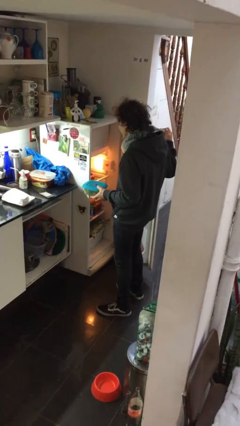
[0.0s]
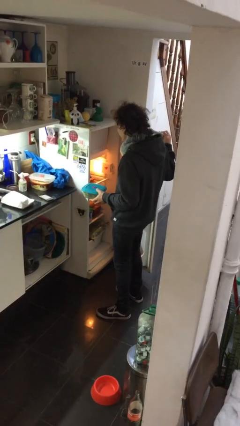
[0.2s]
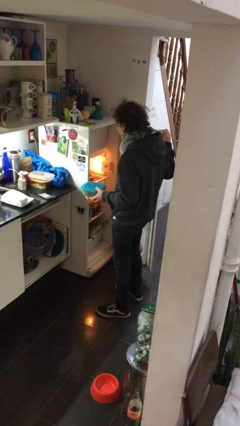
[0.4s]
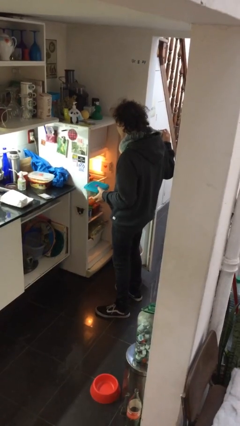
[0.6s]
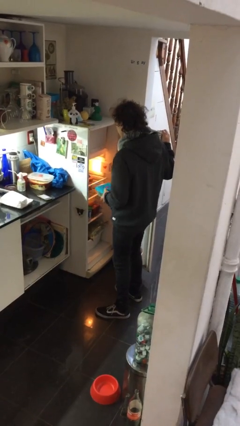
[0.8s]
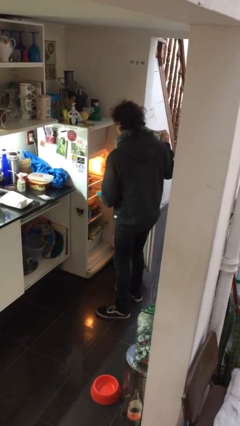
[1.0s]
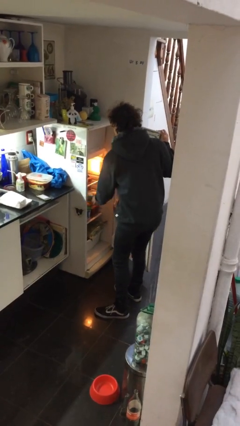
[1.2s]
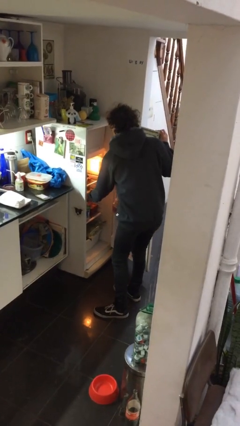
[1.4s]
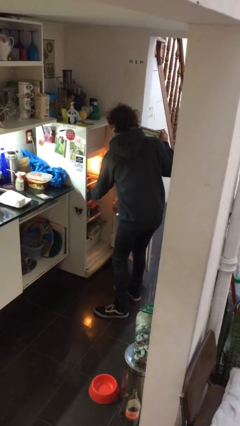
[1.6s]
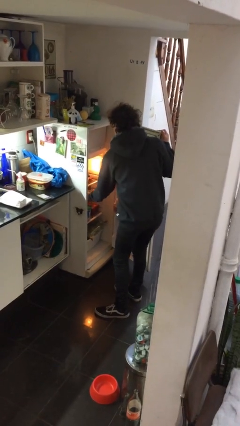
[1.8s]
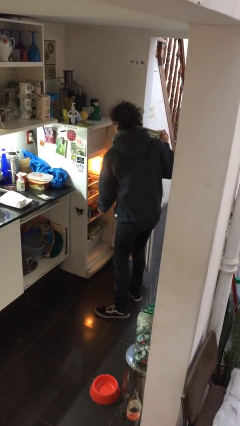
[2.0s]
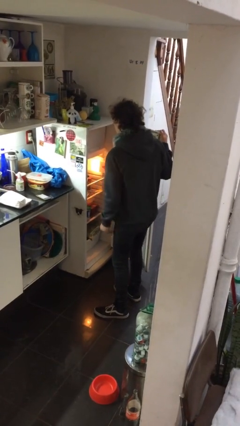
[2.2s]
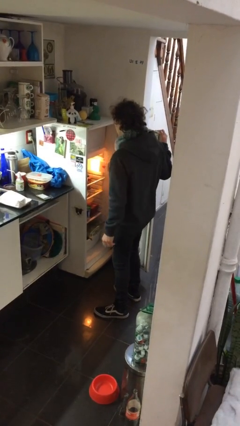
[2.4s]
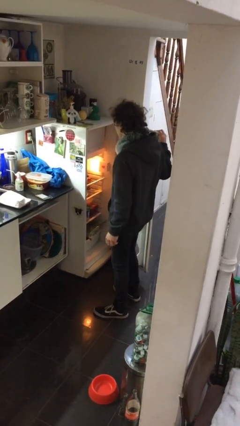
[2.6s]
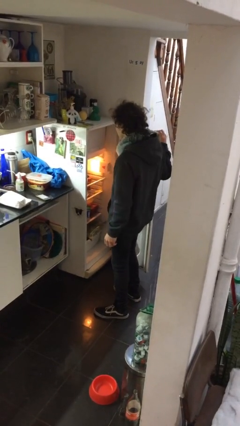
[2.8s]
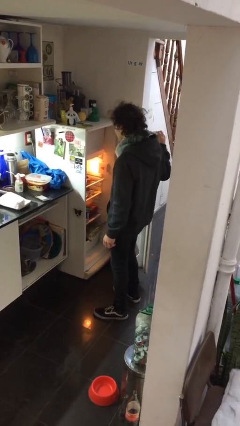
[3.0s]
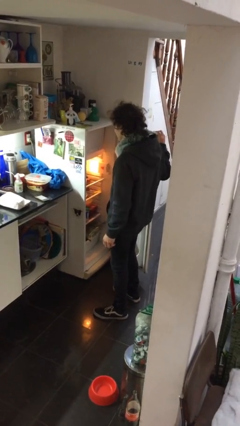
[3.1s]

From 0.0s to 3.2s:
person puts object into refrigerator

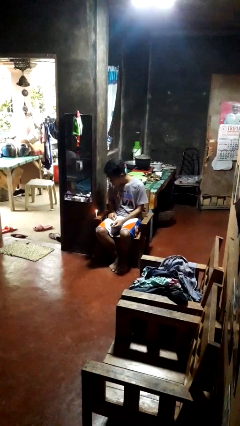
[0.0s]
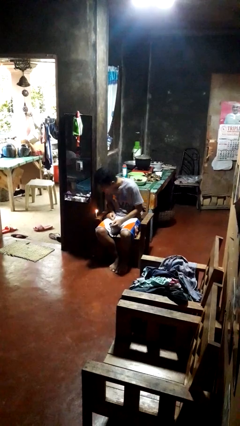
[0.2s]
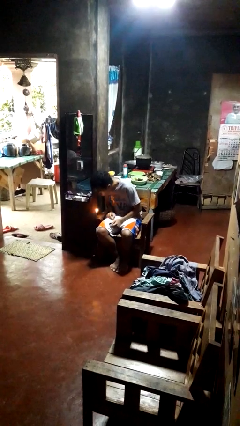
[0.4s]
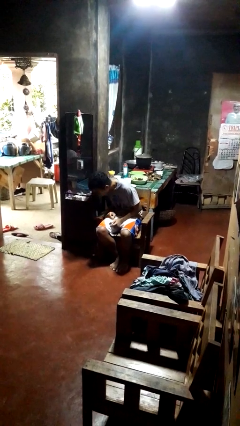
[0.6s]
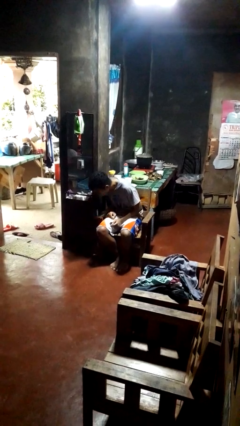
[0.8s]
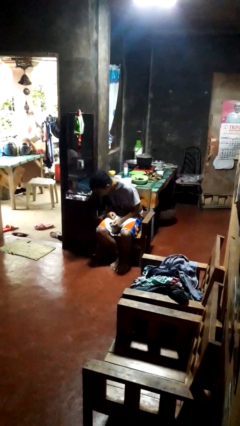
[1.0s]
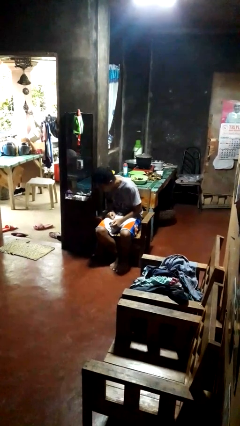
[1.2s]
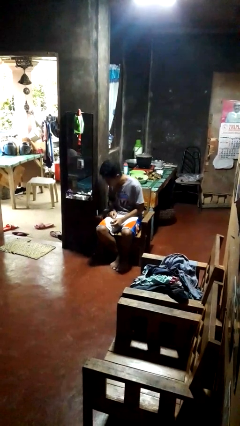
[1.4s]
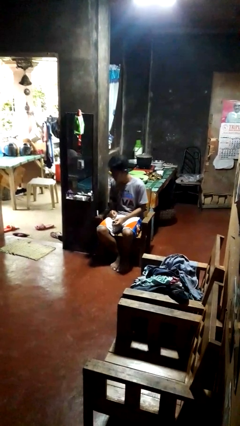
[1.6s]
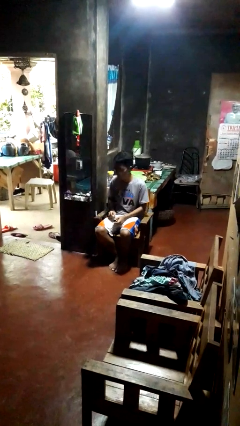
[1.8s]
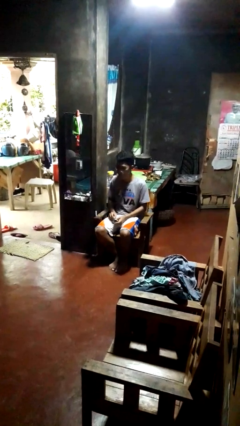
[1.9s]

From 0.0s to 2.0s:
person extinguishes candle

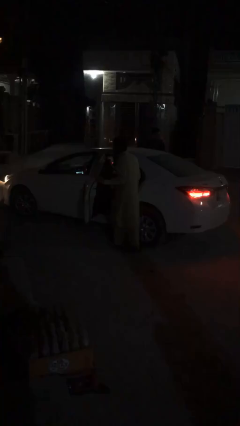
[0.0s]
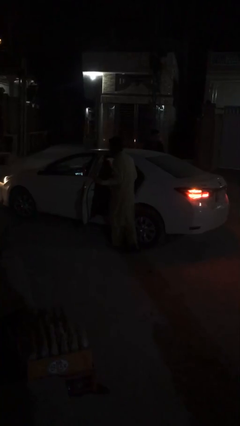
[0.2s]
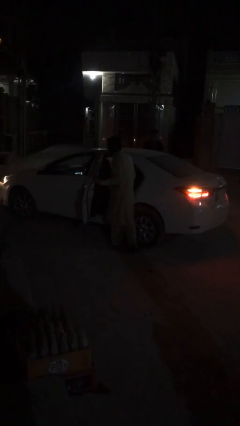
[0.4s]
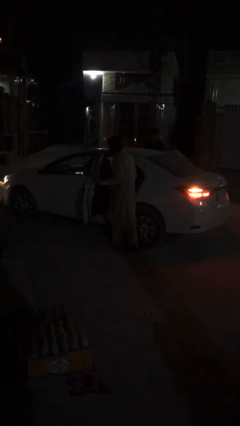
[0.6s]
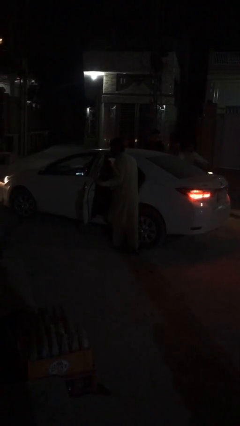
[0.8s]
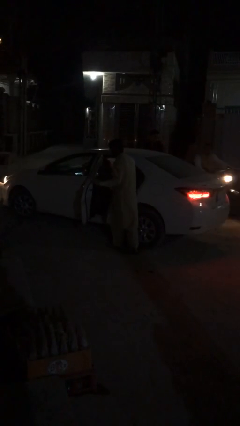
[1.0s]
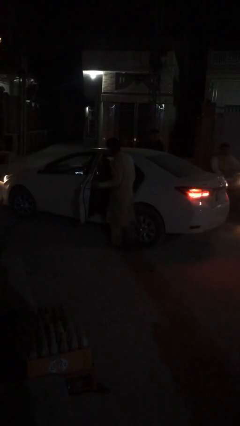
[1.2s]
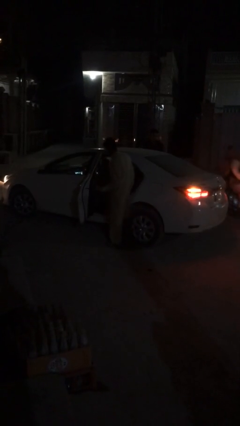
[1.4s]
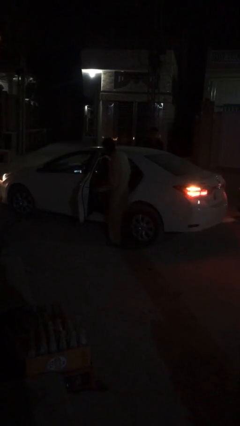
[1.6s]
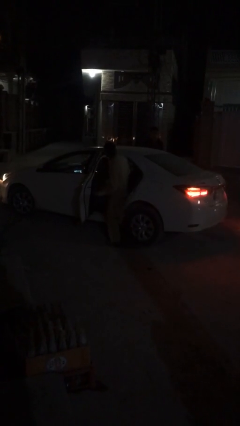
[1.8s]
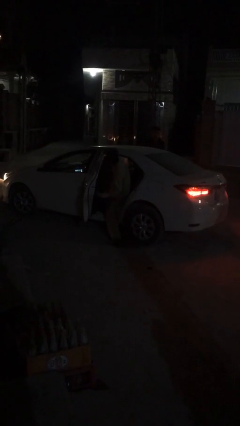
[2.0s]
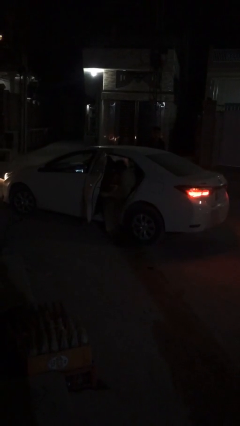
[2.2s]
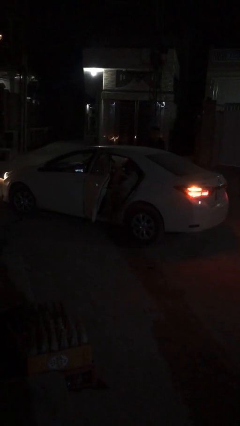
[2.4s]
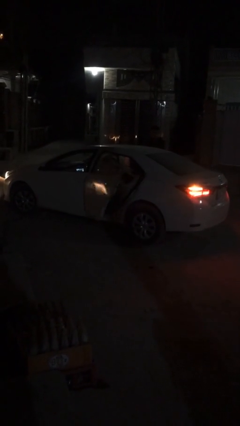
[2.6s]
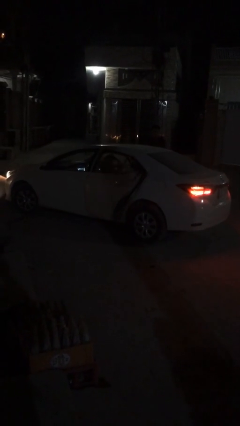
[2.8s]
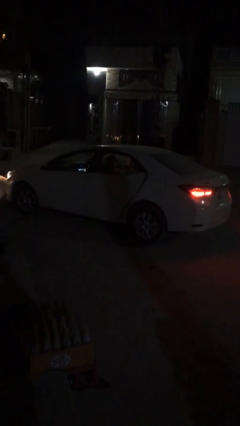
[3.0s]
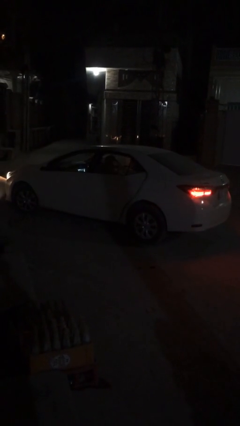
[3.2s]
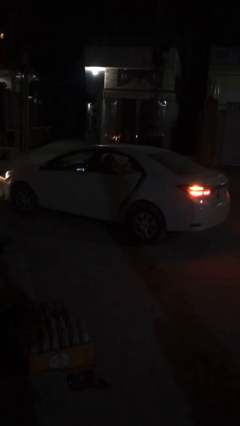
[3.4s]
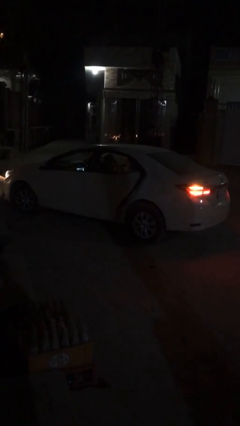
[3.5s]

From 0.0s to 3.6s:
car picks up person

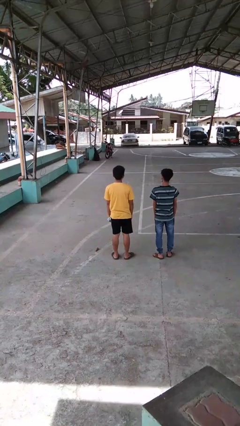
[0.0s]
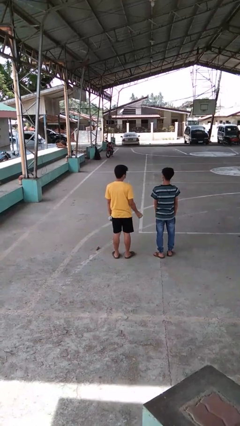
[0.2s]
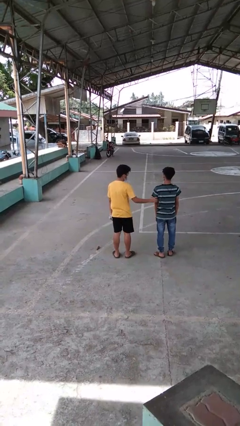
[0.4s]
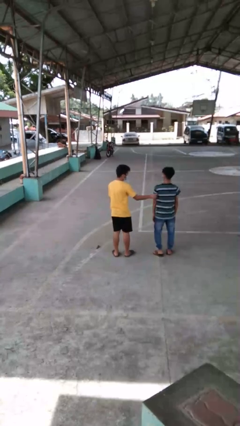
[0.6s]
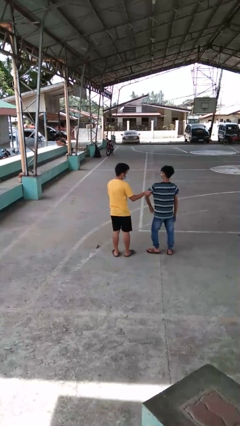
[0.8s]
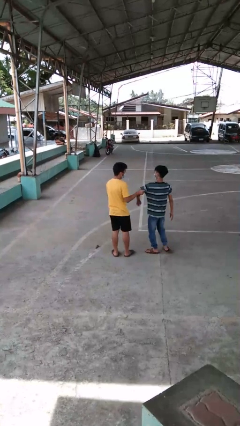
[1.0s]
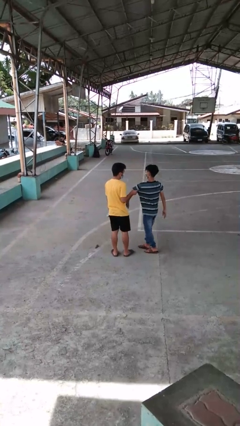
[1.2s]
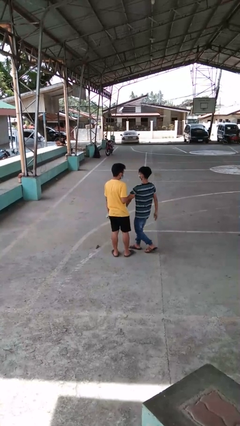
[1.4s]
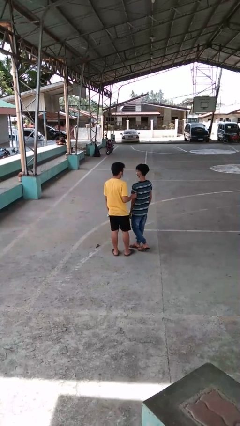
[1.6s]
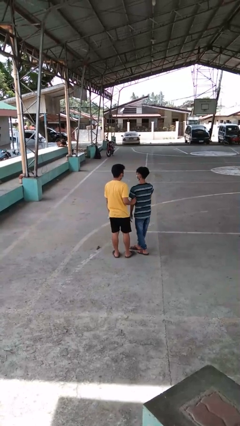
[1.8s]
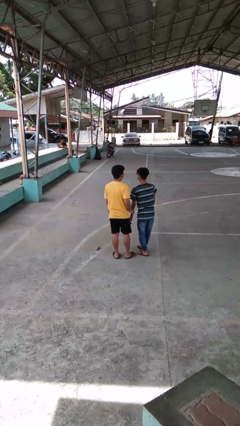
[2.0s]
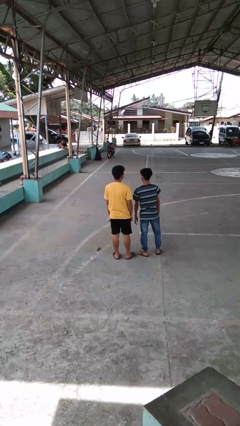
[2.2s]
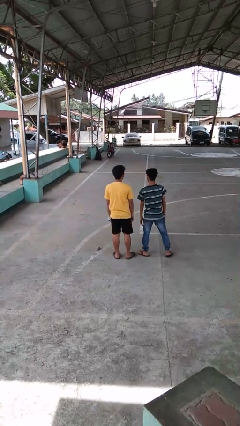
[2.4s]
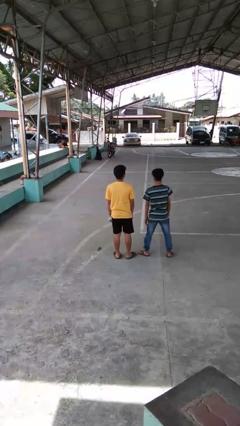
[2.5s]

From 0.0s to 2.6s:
person grabs person by bicep

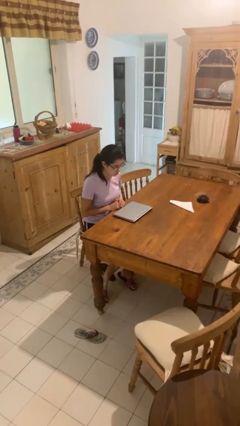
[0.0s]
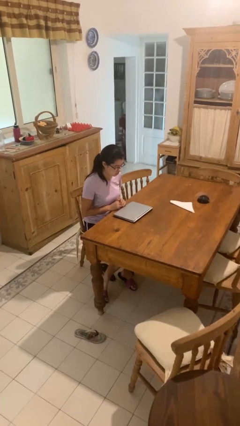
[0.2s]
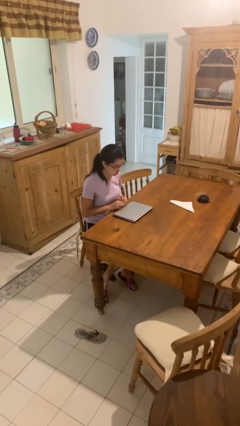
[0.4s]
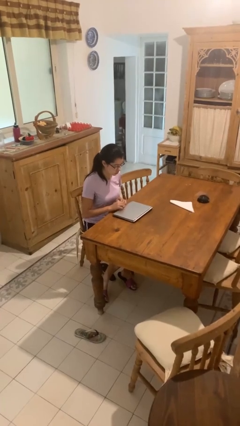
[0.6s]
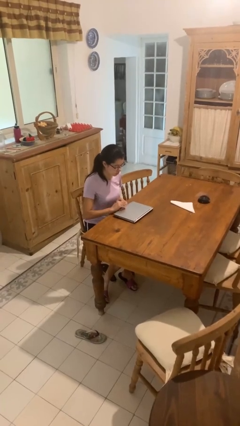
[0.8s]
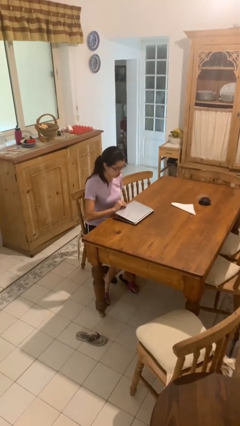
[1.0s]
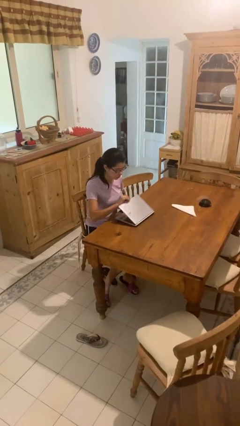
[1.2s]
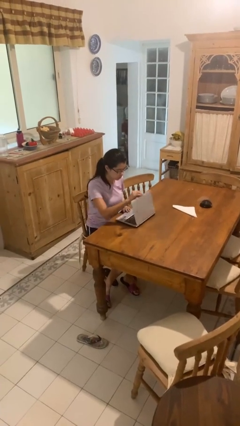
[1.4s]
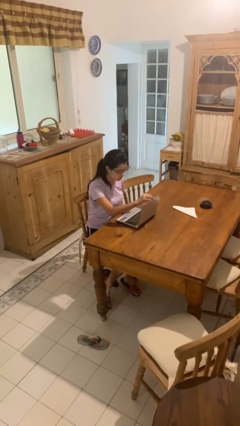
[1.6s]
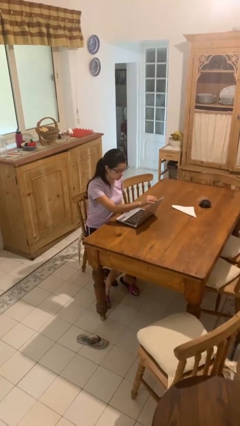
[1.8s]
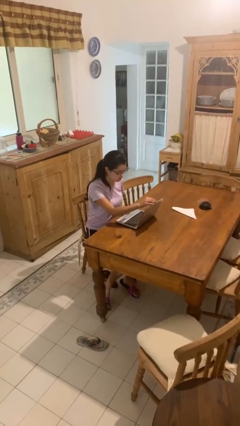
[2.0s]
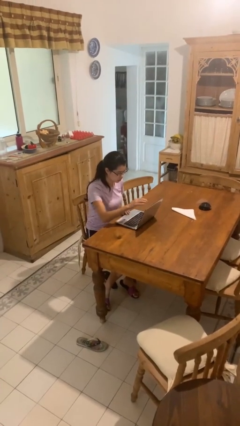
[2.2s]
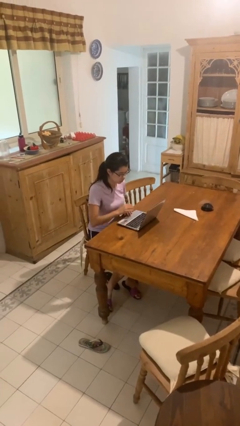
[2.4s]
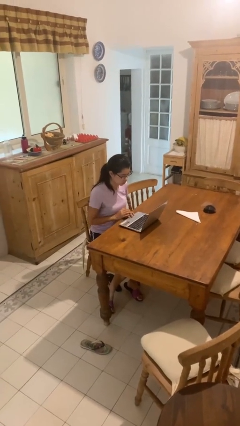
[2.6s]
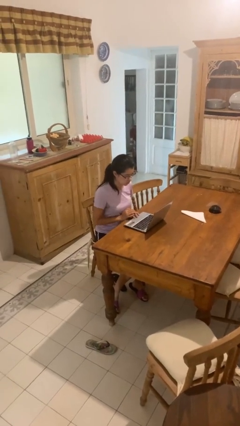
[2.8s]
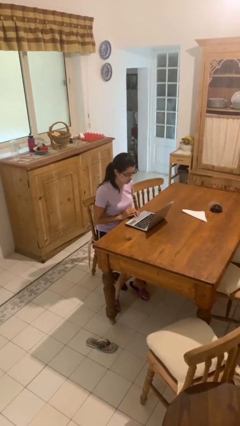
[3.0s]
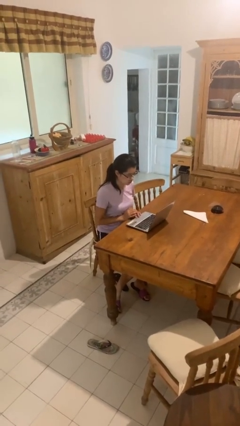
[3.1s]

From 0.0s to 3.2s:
person opens laptop

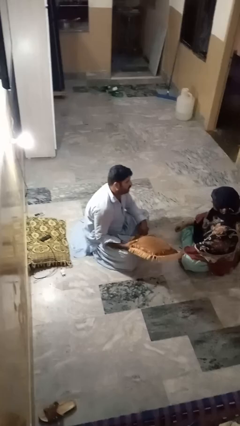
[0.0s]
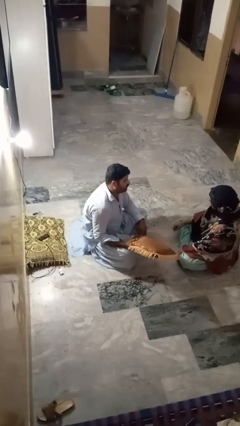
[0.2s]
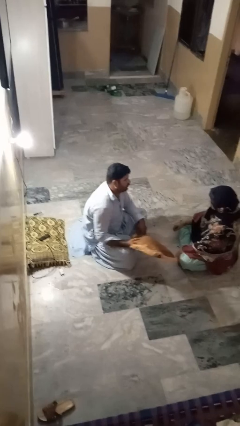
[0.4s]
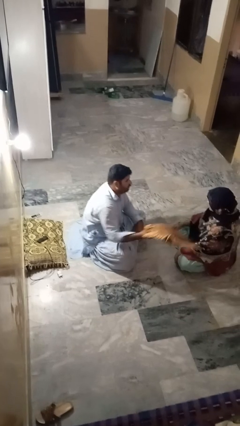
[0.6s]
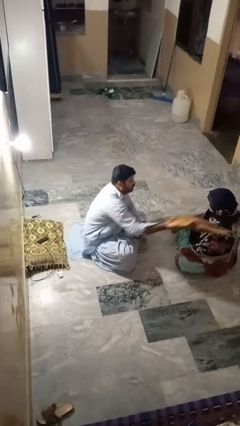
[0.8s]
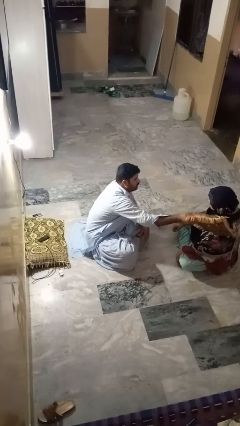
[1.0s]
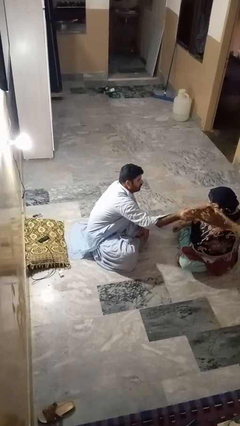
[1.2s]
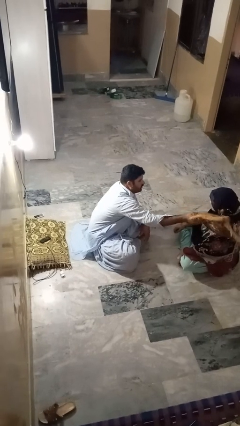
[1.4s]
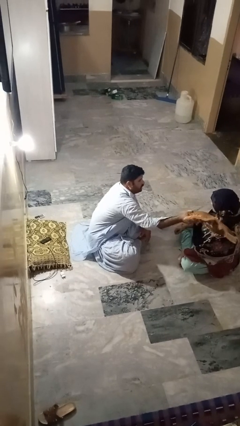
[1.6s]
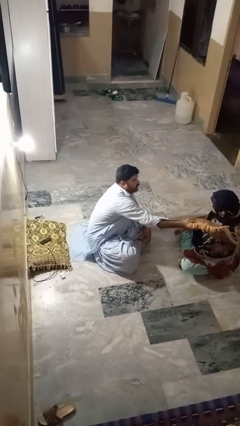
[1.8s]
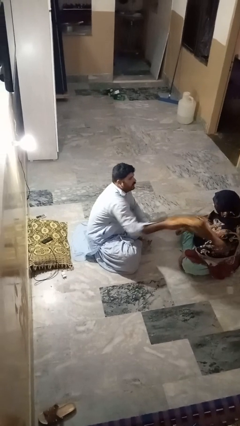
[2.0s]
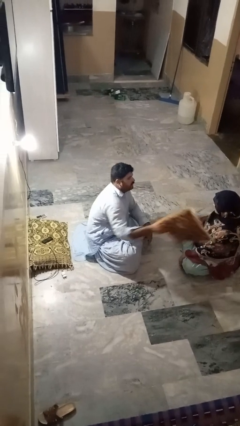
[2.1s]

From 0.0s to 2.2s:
person hits person with pillow

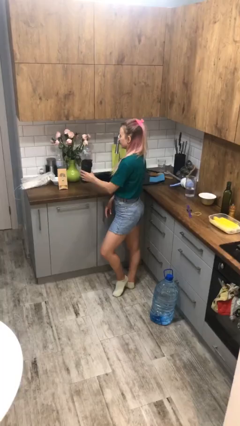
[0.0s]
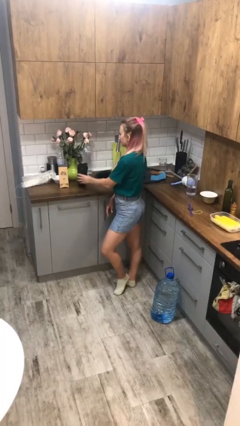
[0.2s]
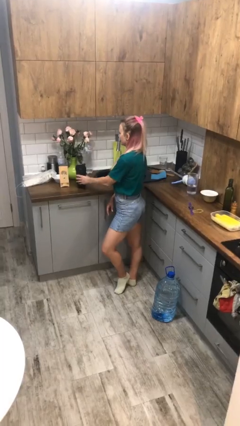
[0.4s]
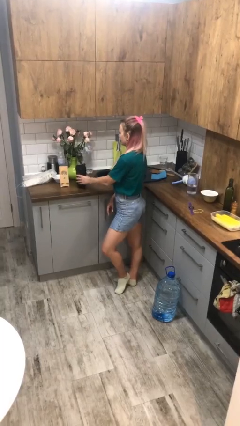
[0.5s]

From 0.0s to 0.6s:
person puts down object on countertop
